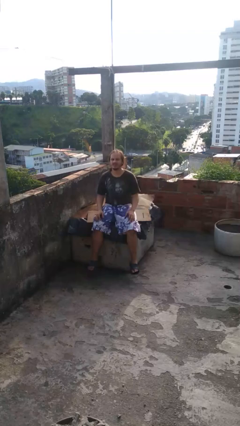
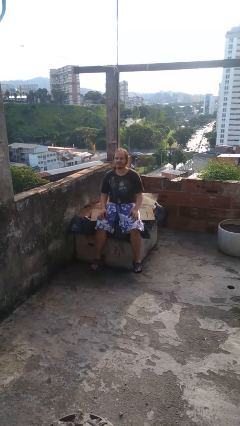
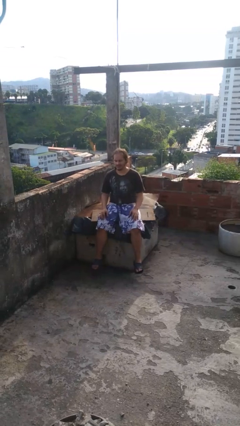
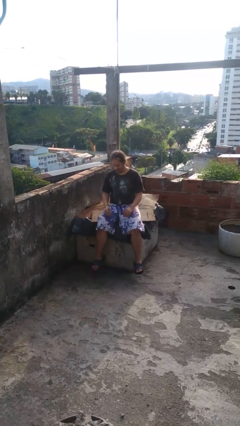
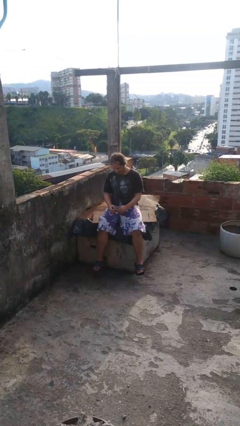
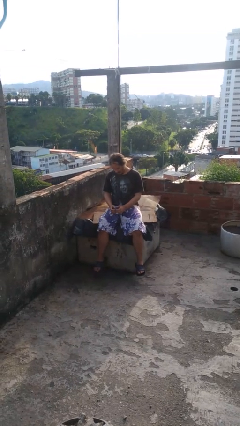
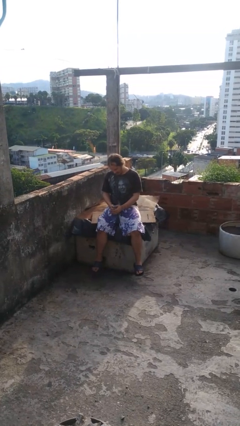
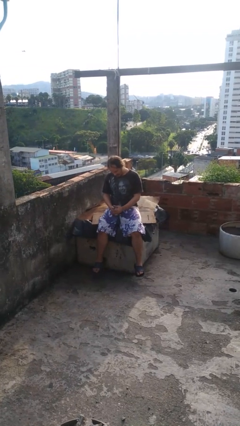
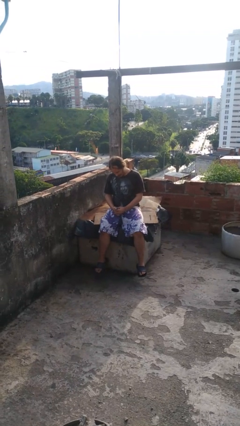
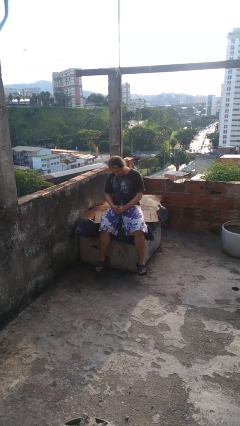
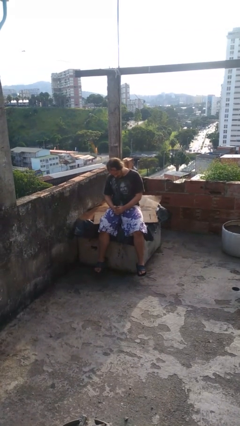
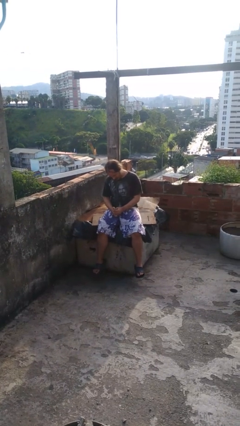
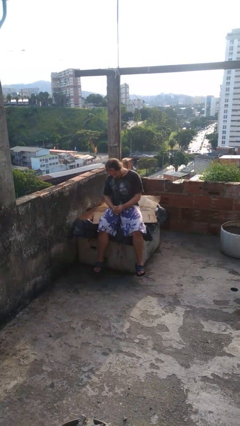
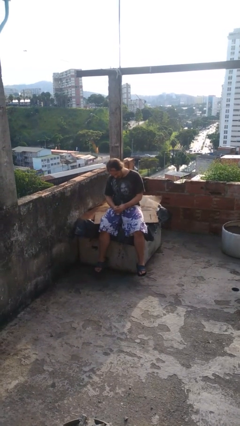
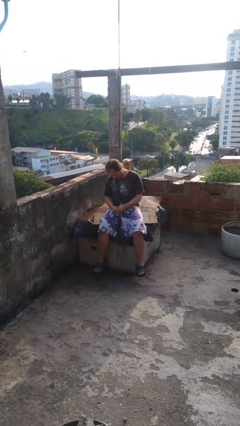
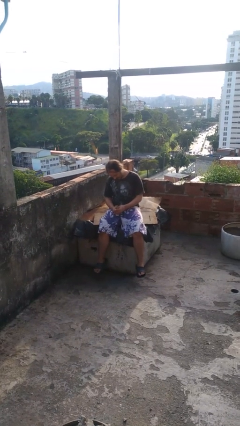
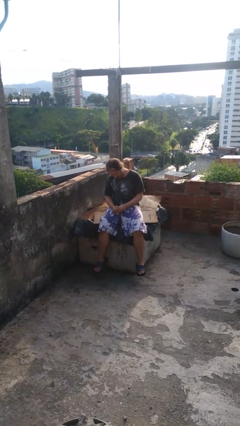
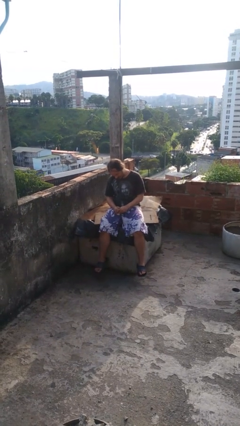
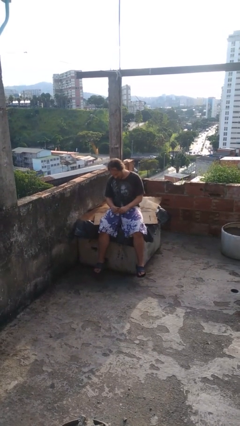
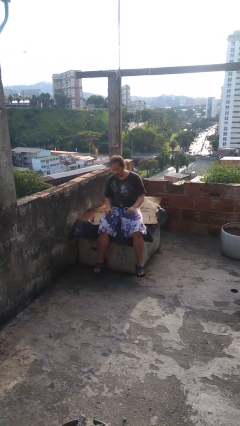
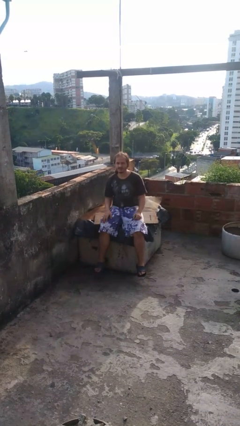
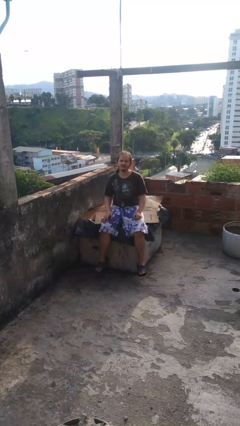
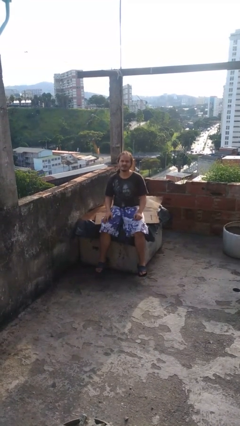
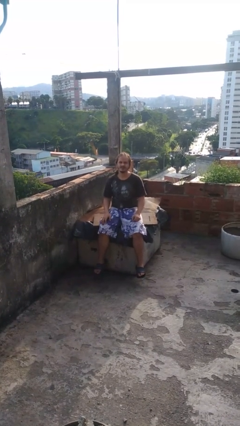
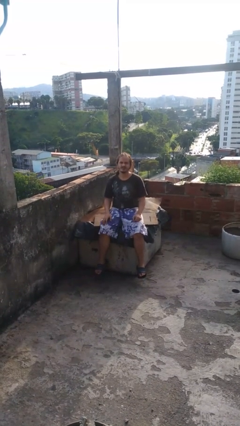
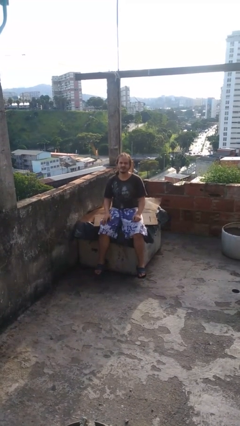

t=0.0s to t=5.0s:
person looks at hands in lap

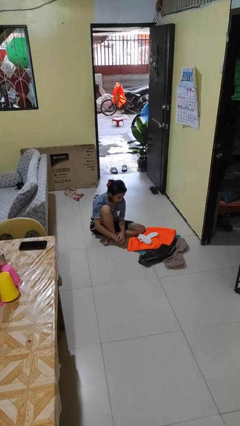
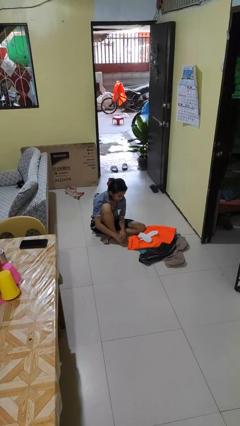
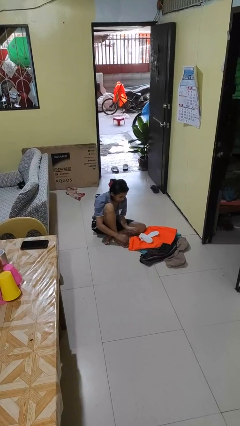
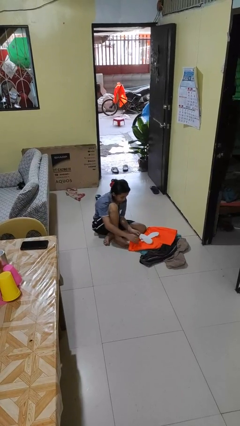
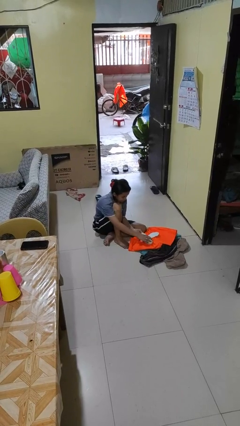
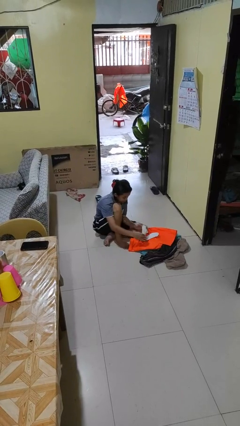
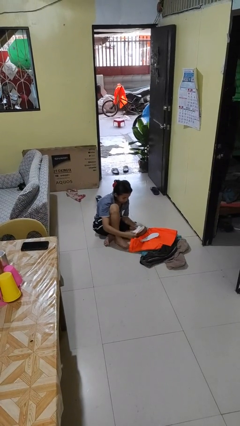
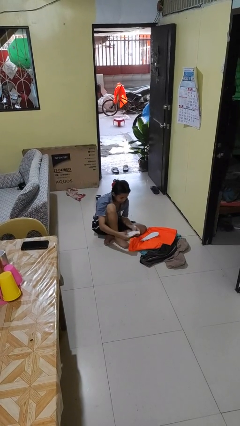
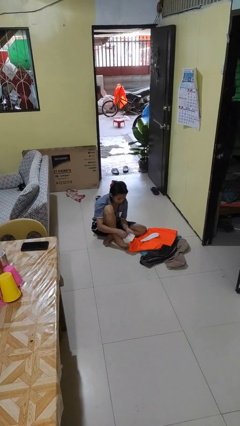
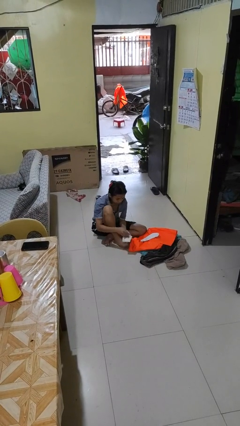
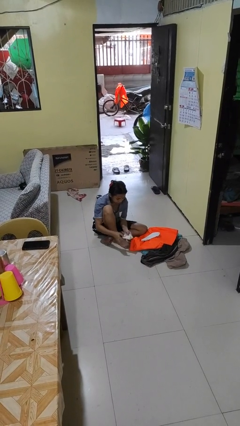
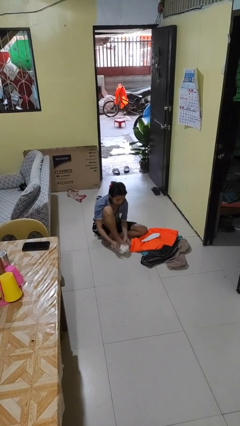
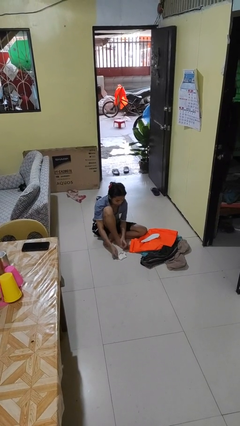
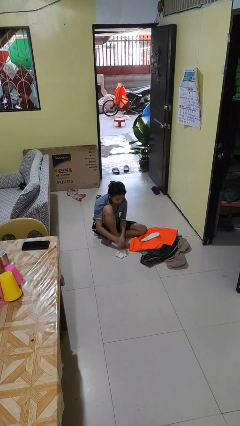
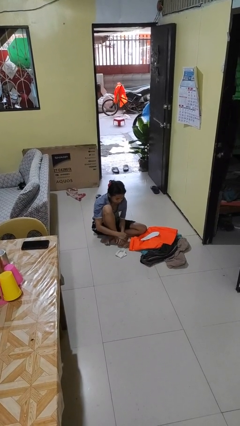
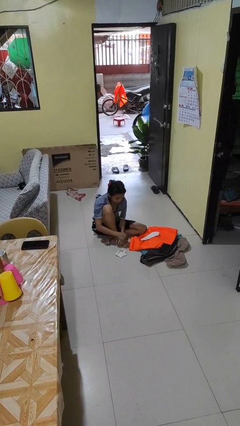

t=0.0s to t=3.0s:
person folds socks

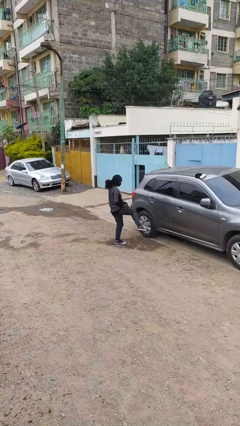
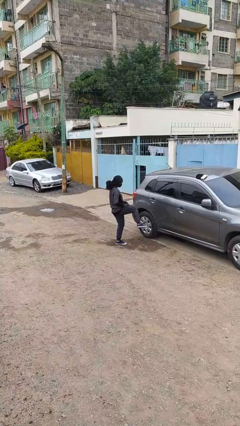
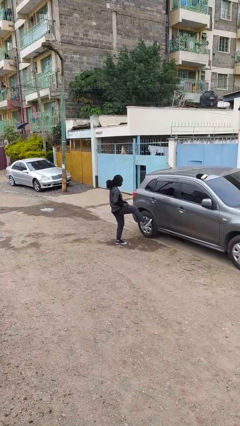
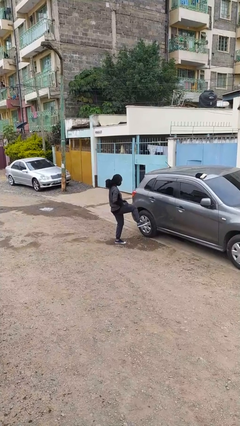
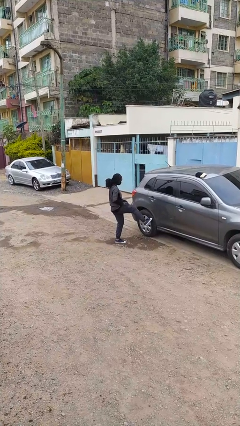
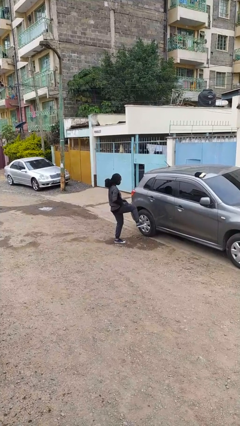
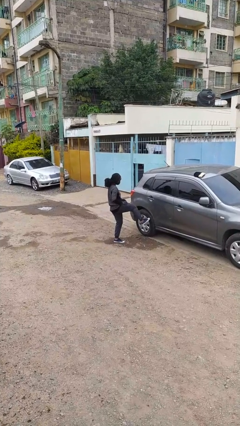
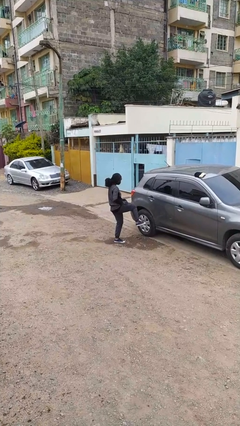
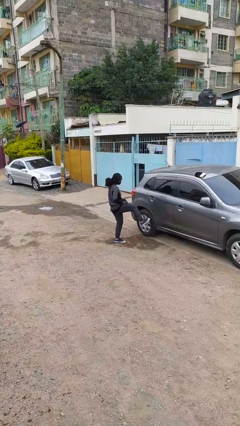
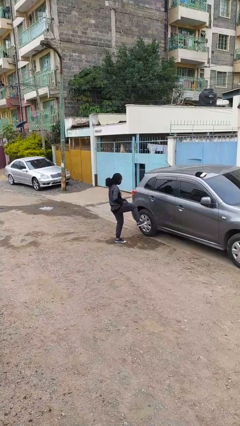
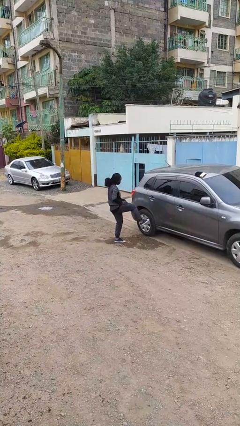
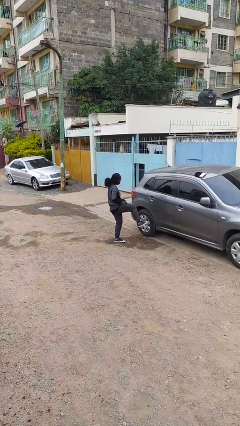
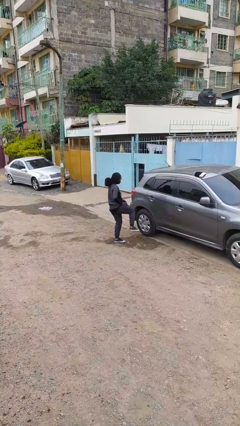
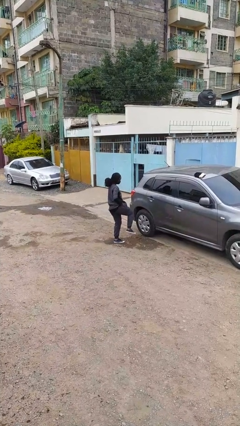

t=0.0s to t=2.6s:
person kicks car tires

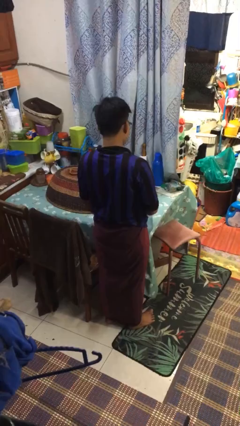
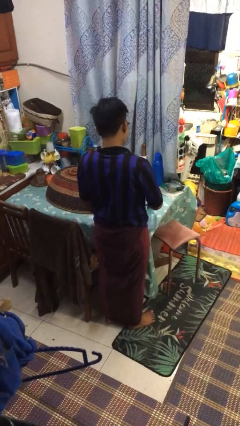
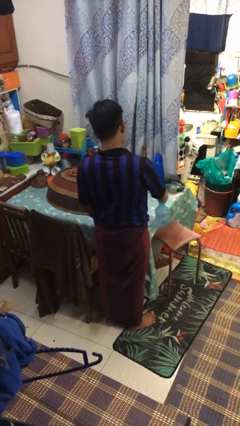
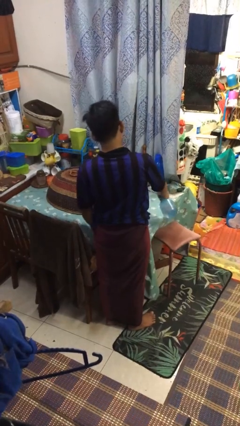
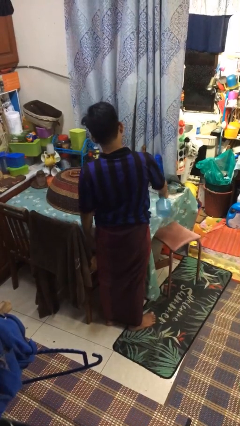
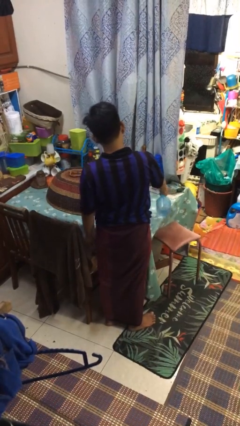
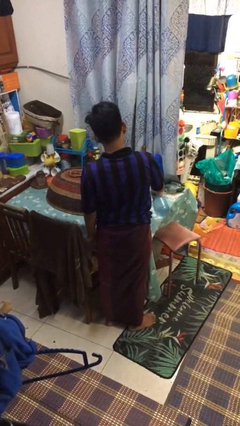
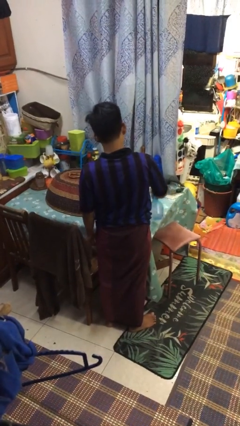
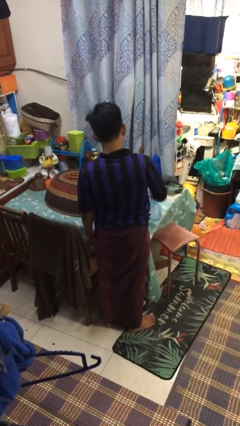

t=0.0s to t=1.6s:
person sprays from bottle

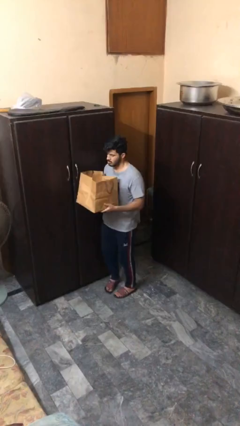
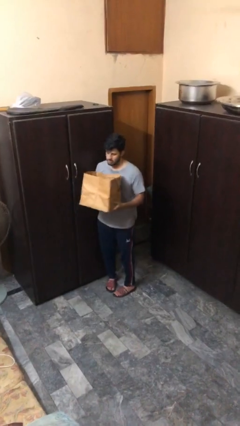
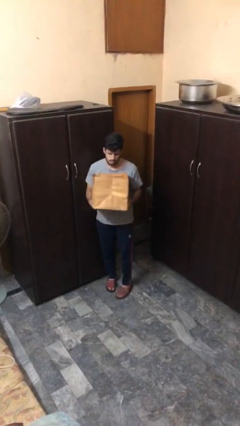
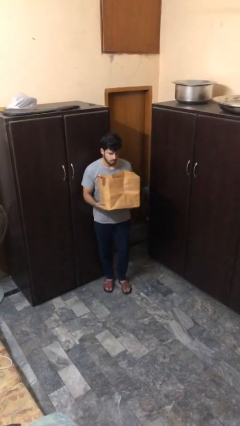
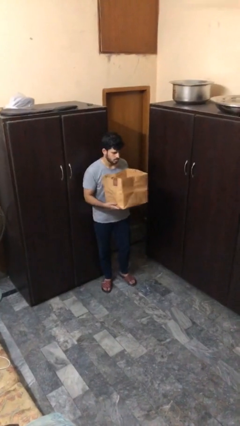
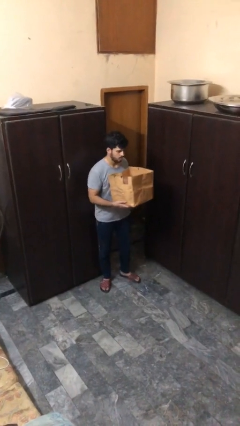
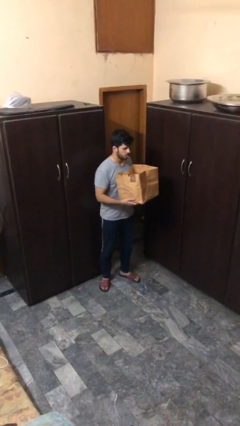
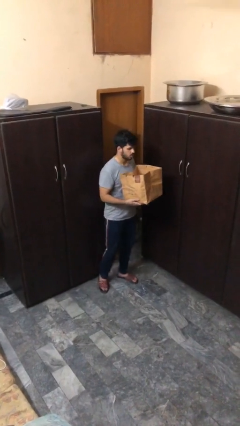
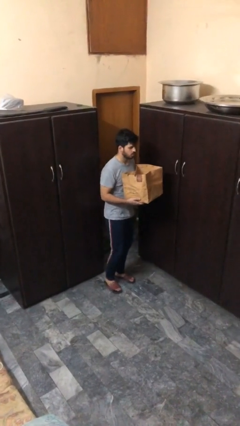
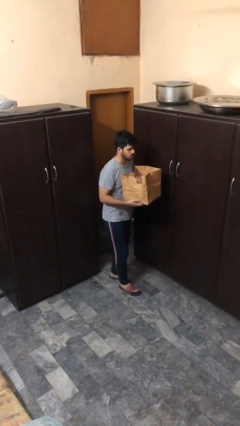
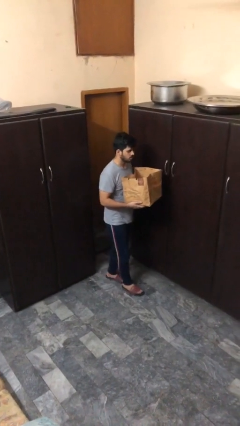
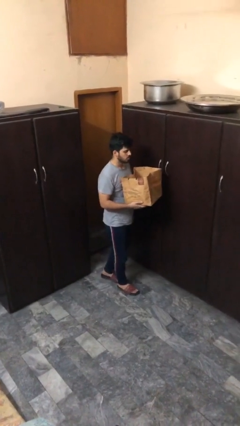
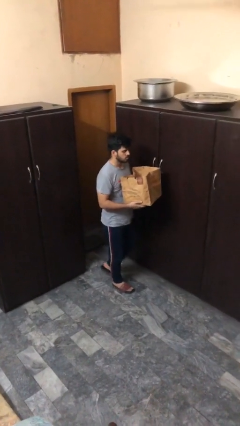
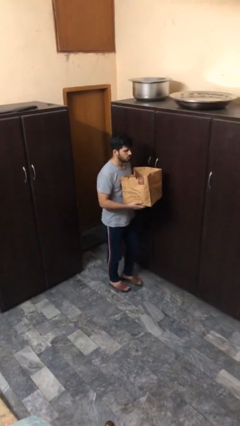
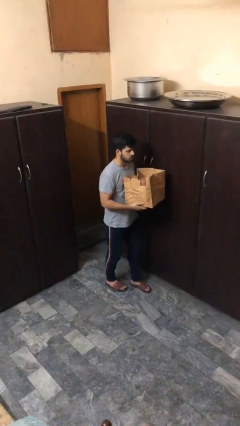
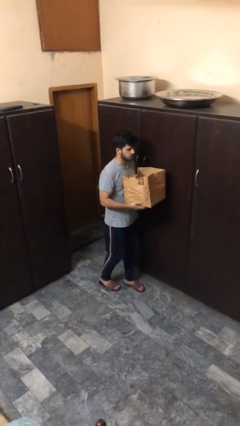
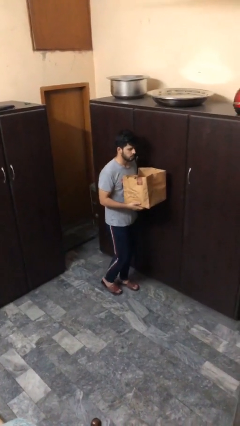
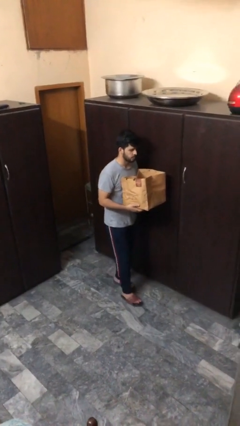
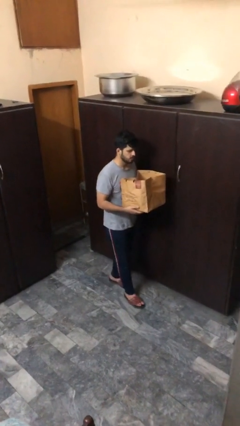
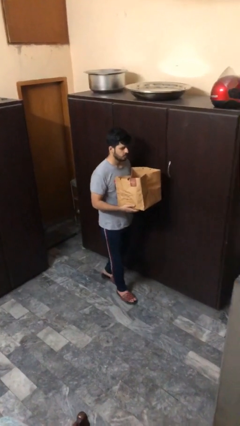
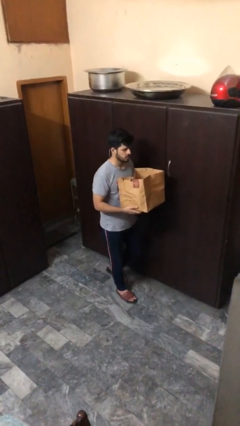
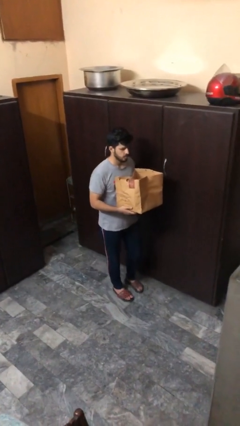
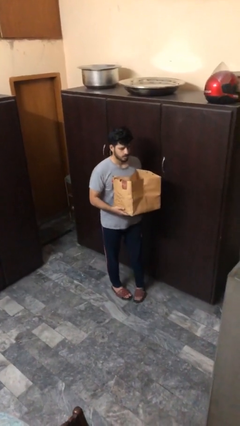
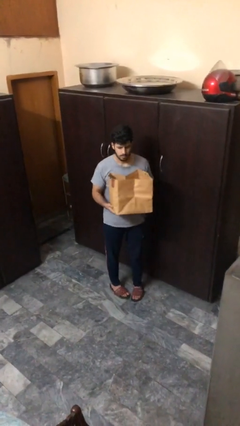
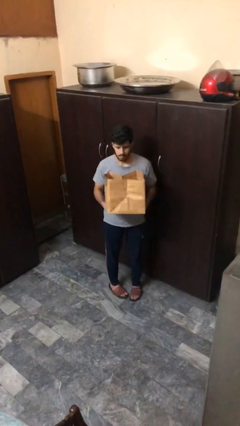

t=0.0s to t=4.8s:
person carries groceries

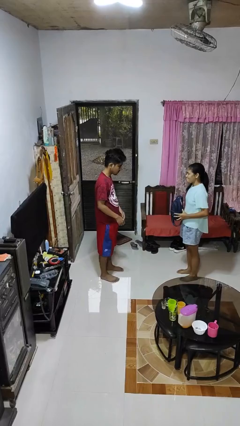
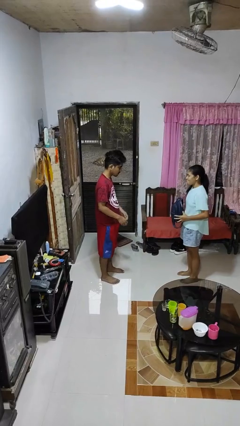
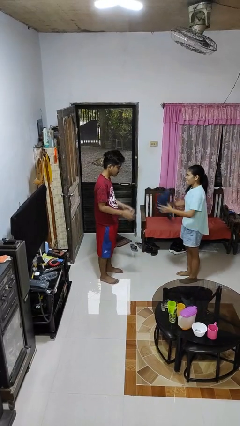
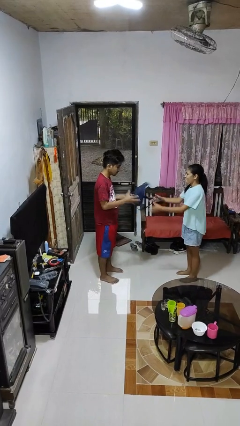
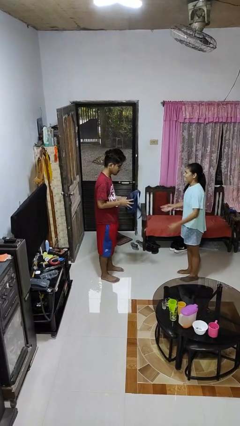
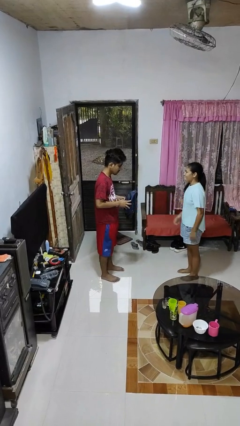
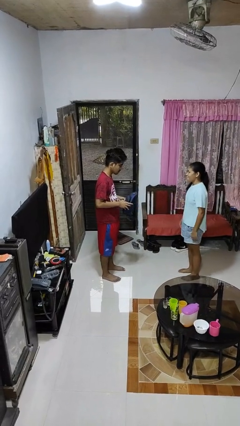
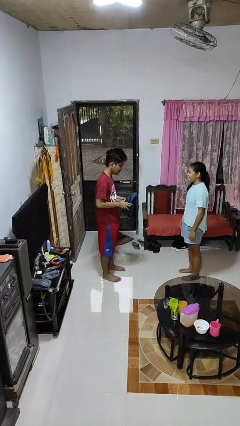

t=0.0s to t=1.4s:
person catches object from person
